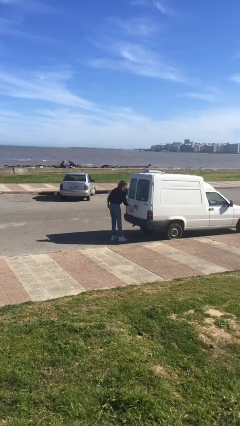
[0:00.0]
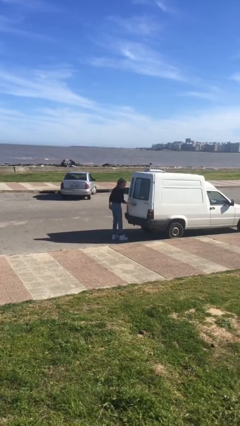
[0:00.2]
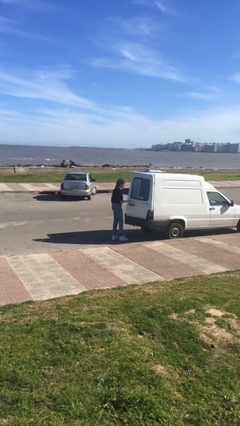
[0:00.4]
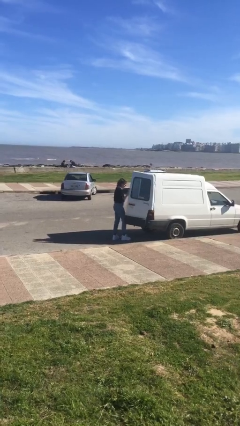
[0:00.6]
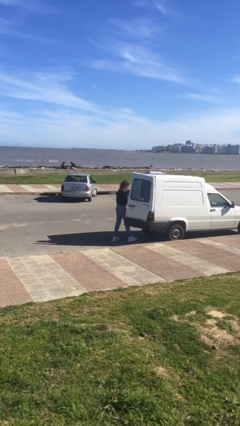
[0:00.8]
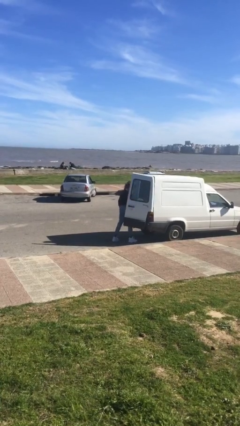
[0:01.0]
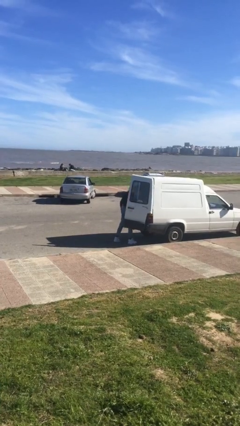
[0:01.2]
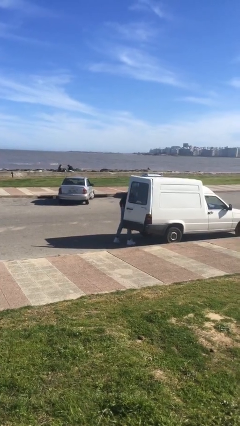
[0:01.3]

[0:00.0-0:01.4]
person opens car door

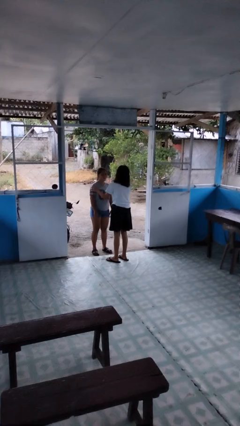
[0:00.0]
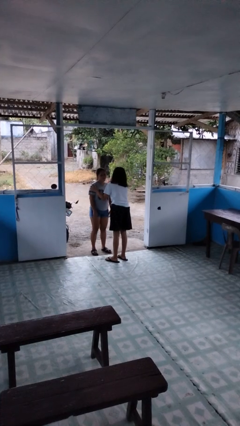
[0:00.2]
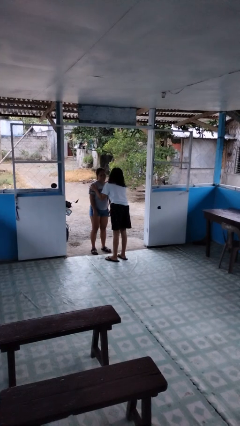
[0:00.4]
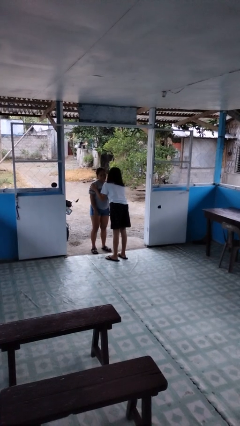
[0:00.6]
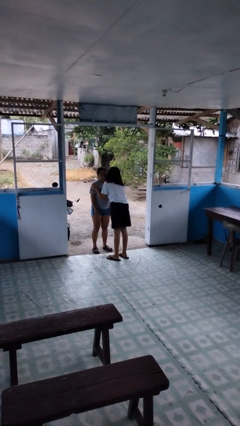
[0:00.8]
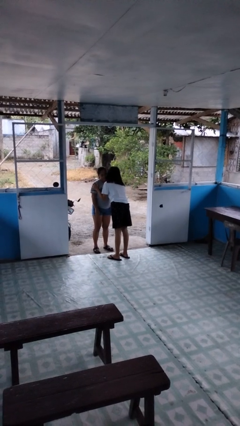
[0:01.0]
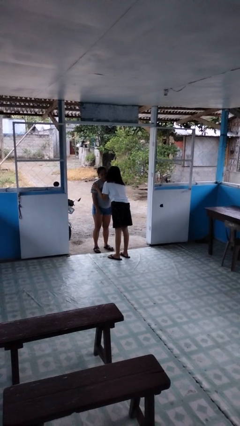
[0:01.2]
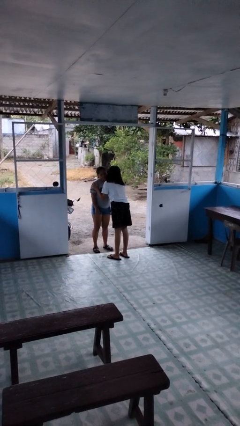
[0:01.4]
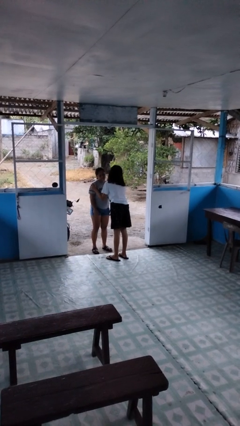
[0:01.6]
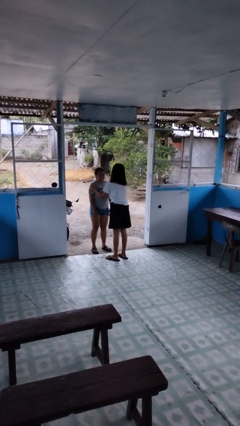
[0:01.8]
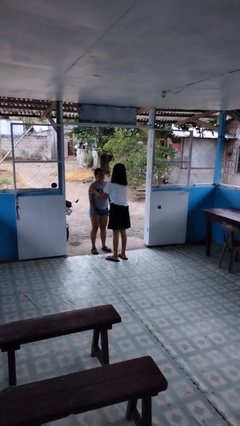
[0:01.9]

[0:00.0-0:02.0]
person kisses cheek of person

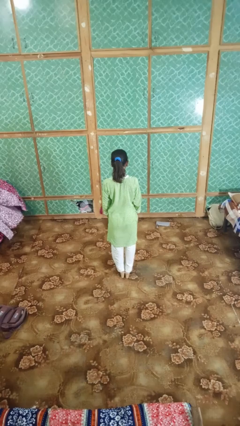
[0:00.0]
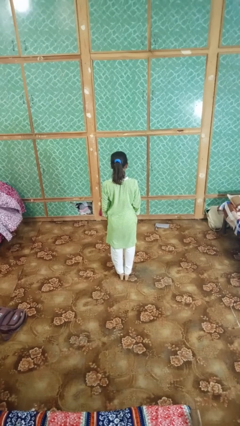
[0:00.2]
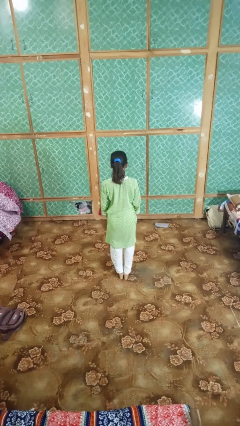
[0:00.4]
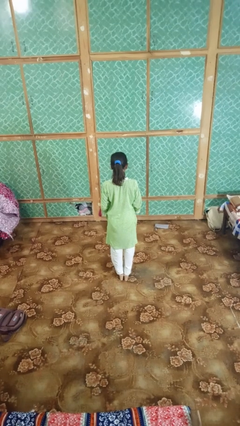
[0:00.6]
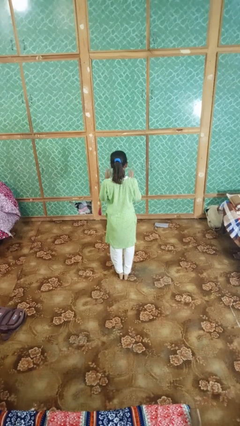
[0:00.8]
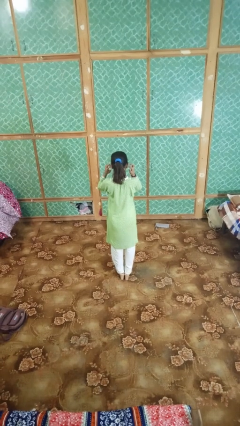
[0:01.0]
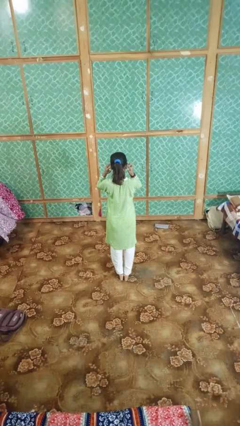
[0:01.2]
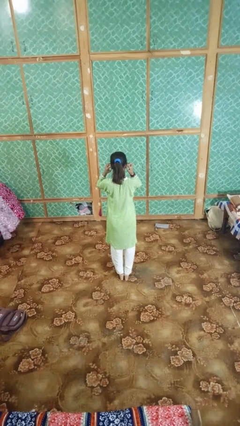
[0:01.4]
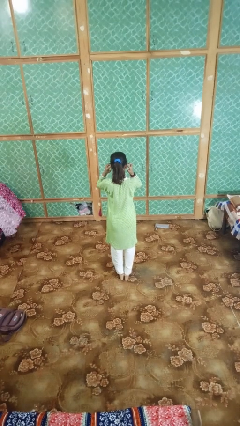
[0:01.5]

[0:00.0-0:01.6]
person puts fingers in ear

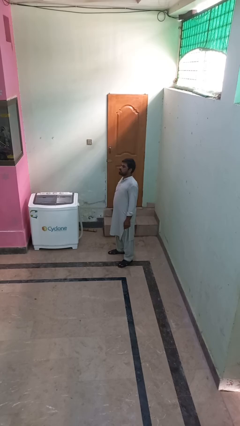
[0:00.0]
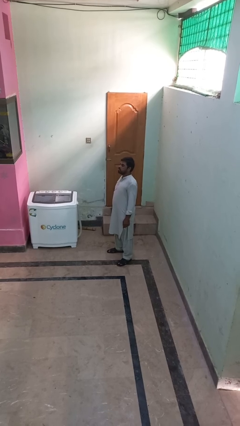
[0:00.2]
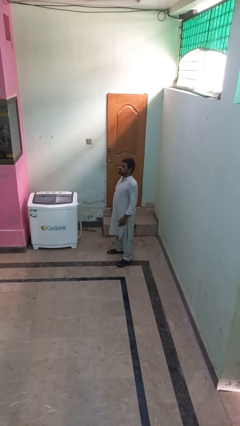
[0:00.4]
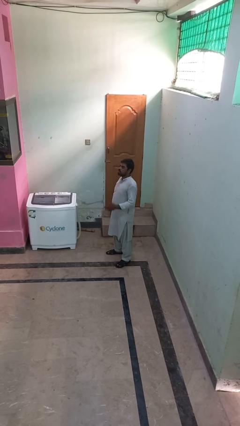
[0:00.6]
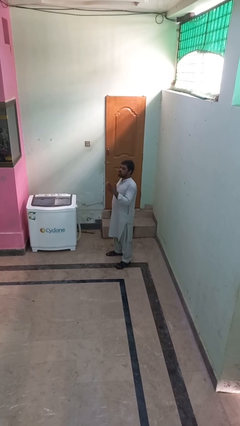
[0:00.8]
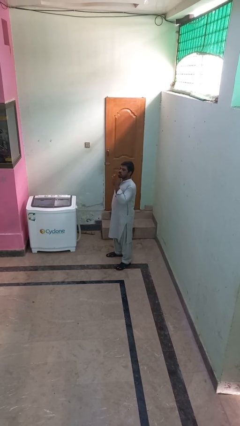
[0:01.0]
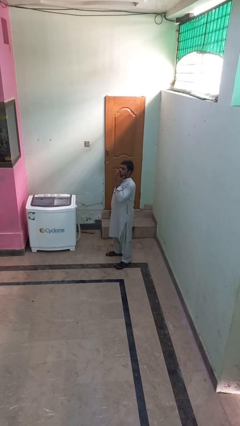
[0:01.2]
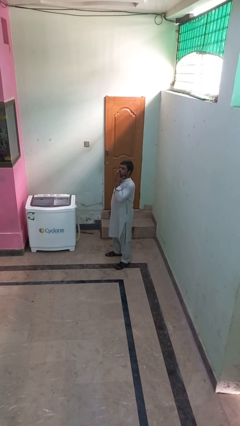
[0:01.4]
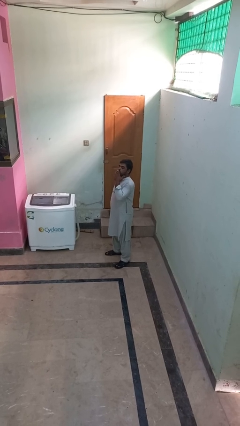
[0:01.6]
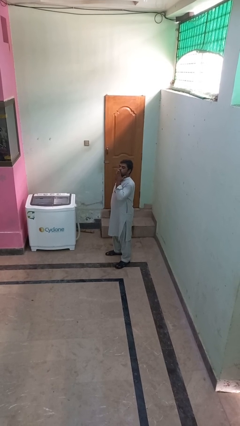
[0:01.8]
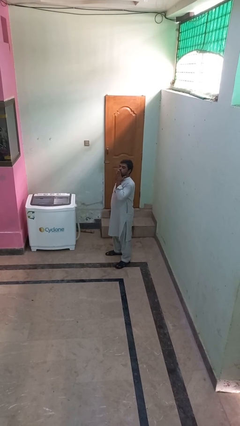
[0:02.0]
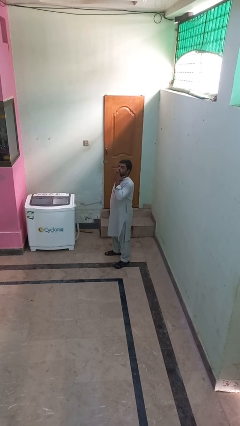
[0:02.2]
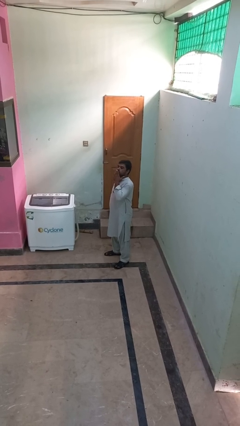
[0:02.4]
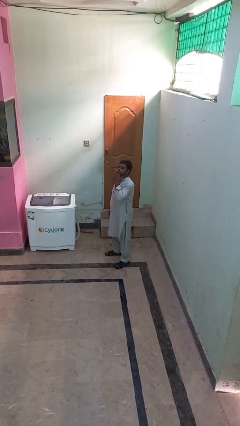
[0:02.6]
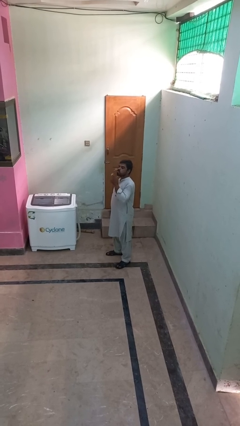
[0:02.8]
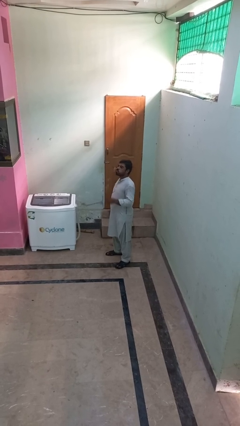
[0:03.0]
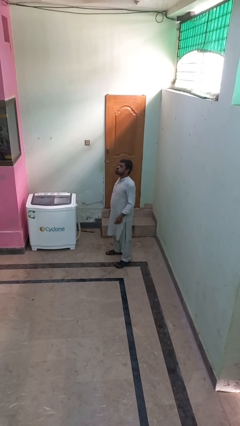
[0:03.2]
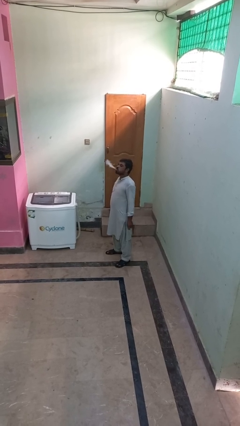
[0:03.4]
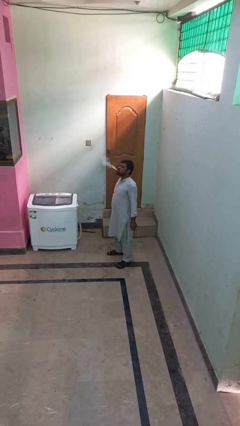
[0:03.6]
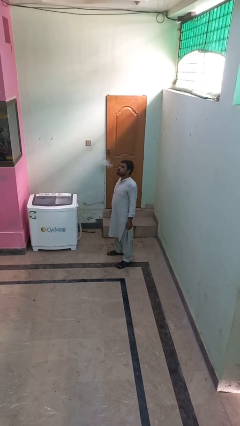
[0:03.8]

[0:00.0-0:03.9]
person vapes

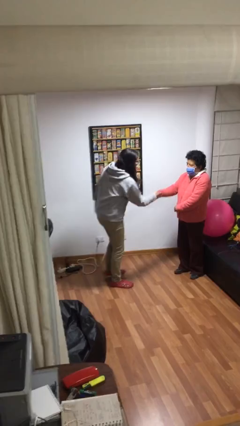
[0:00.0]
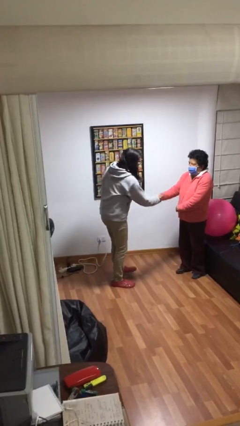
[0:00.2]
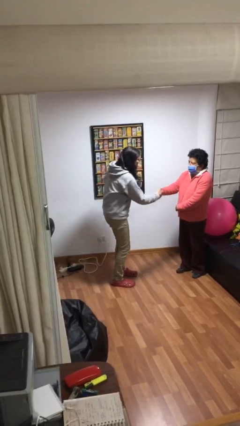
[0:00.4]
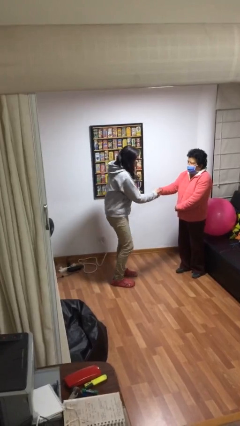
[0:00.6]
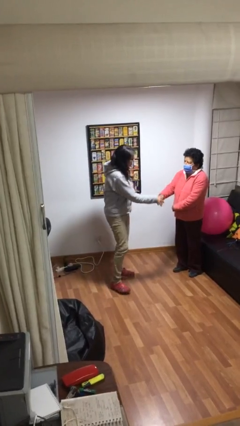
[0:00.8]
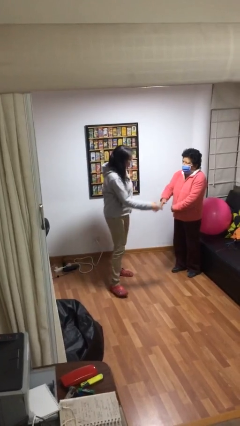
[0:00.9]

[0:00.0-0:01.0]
person shakes hand

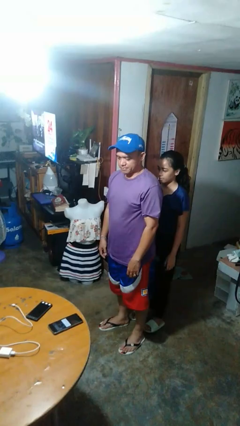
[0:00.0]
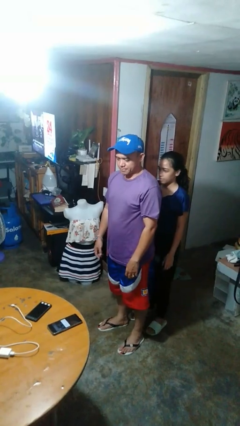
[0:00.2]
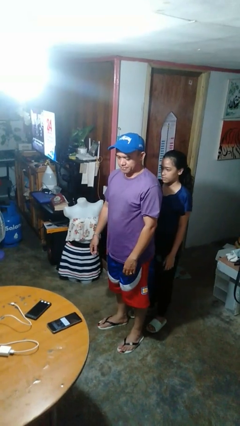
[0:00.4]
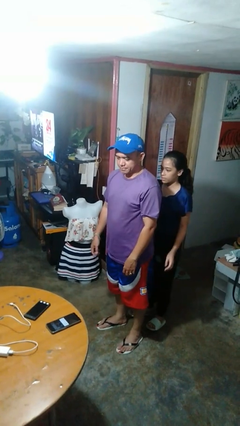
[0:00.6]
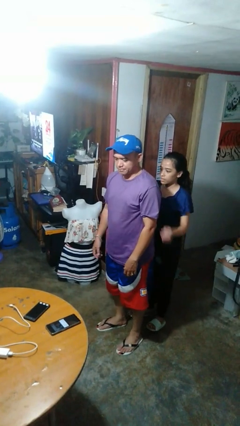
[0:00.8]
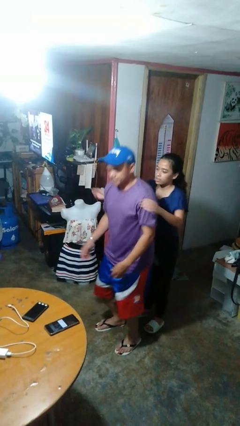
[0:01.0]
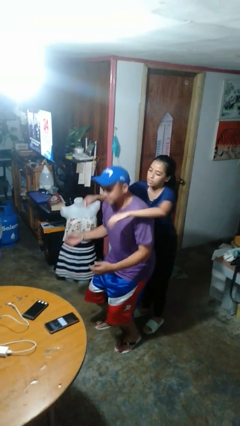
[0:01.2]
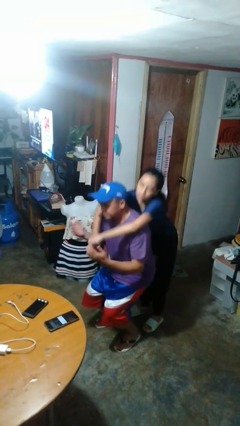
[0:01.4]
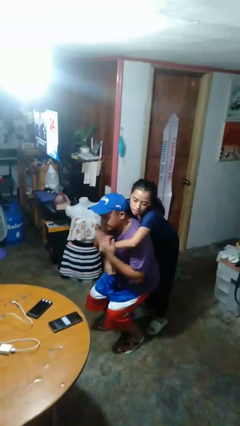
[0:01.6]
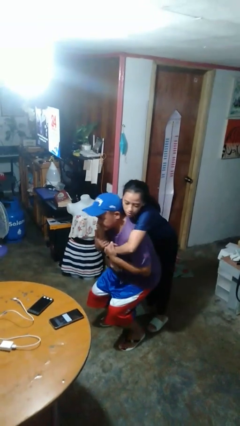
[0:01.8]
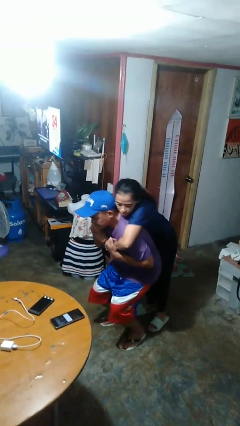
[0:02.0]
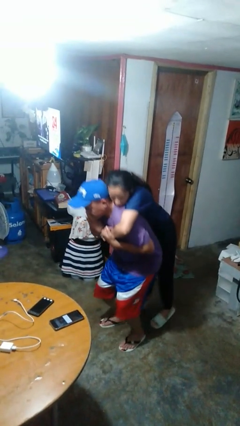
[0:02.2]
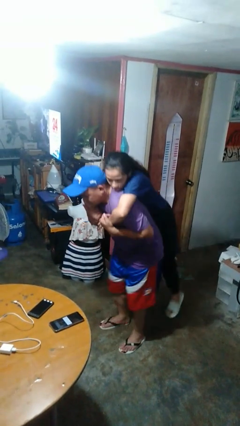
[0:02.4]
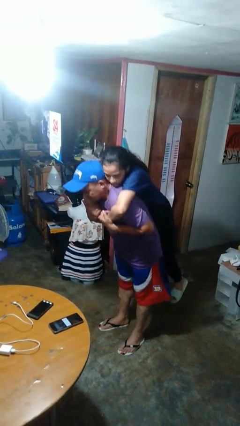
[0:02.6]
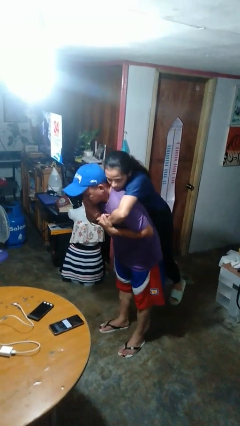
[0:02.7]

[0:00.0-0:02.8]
person picks up person

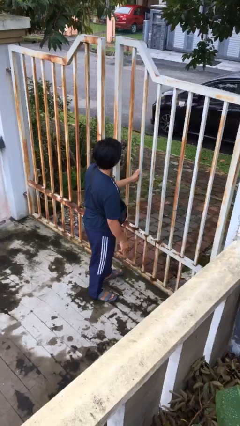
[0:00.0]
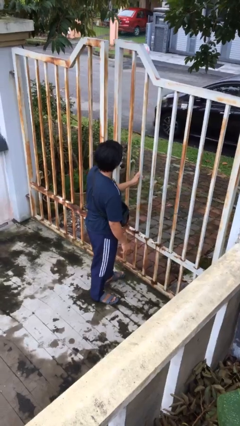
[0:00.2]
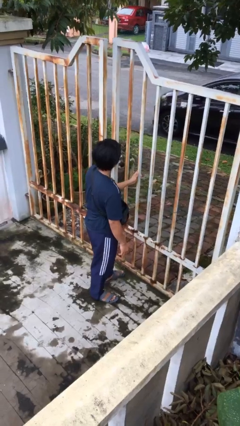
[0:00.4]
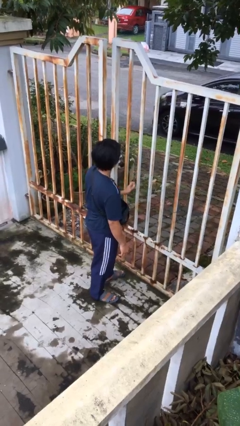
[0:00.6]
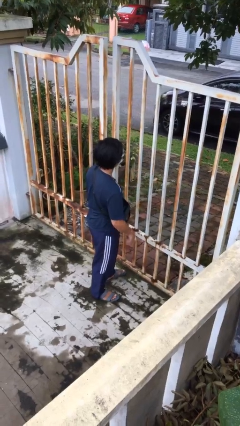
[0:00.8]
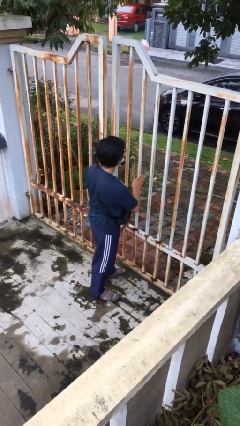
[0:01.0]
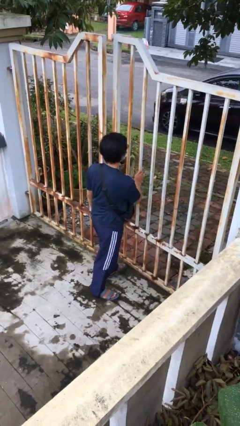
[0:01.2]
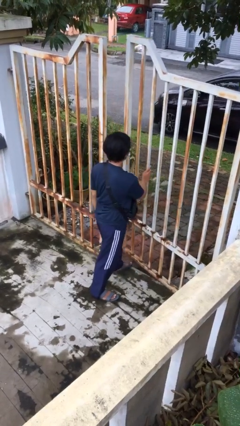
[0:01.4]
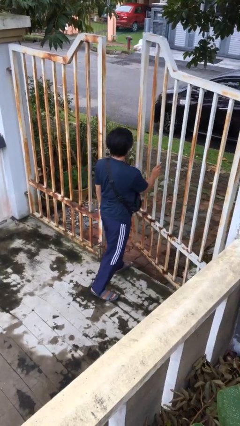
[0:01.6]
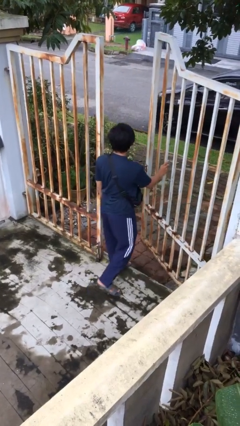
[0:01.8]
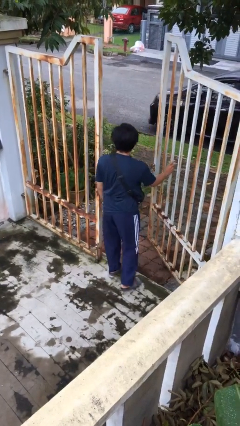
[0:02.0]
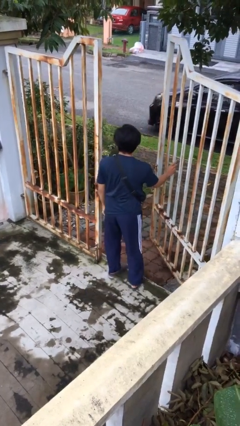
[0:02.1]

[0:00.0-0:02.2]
person opens facility door

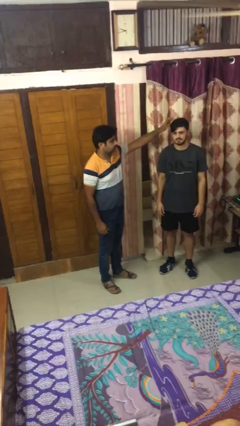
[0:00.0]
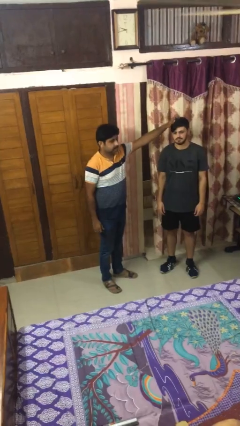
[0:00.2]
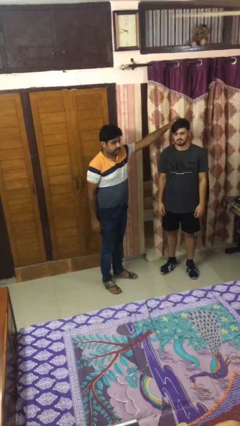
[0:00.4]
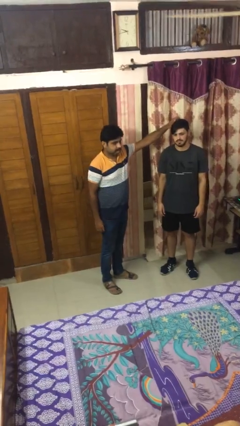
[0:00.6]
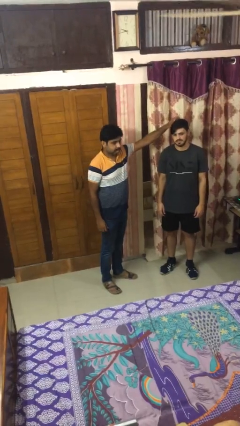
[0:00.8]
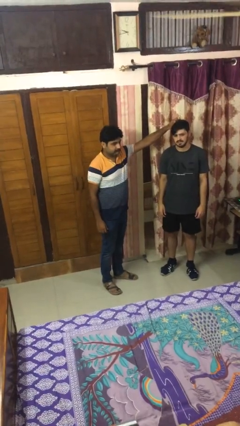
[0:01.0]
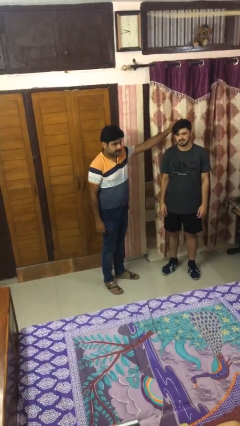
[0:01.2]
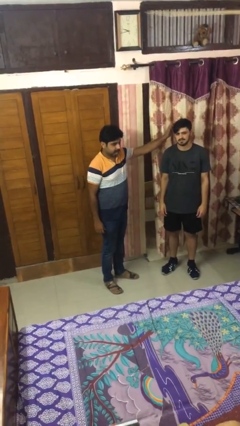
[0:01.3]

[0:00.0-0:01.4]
person grabs person by hair

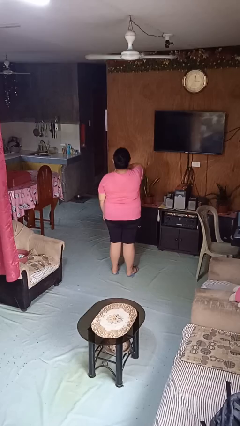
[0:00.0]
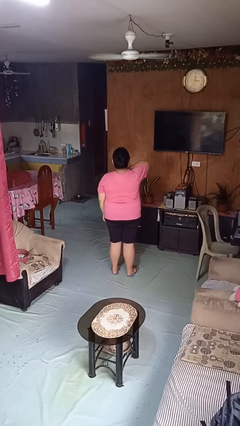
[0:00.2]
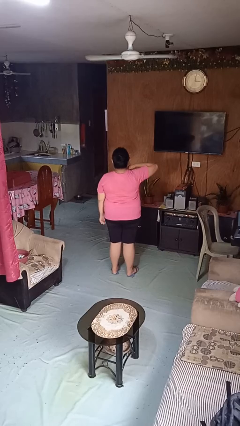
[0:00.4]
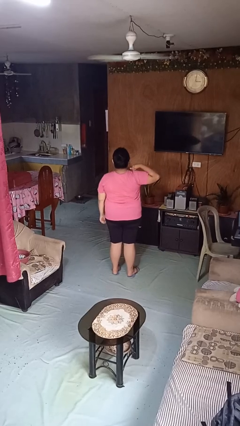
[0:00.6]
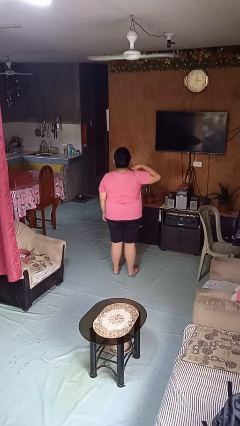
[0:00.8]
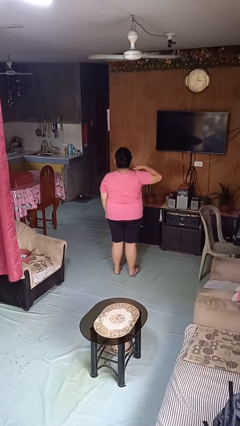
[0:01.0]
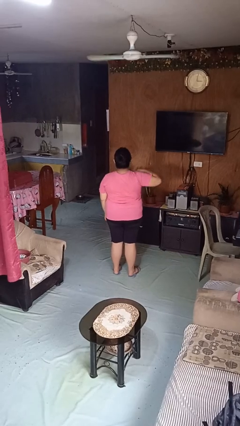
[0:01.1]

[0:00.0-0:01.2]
person gestures cut
